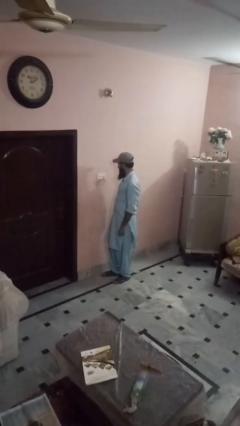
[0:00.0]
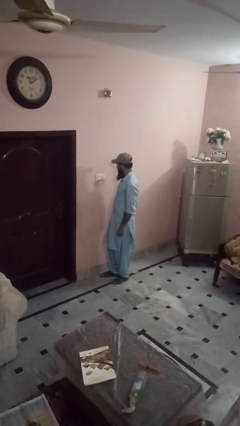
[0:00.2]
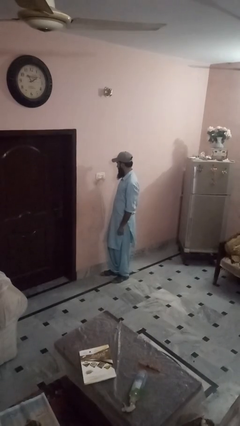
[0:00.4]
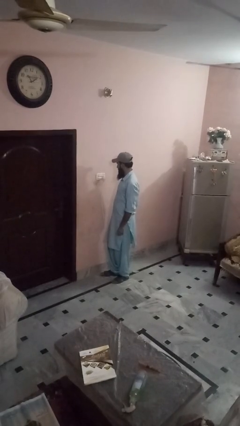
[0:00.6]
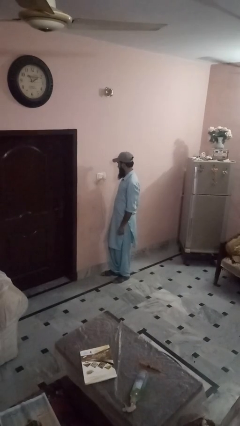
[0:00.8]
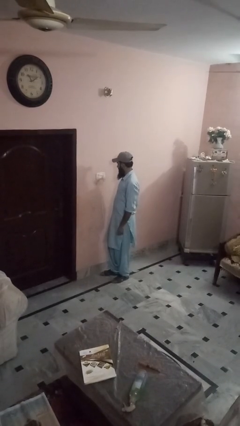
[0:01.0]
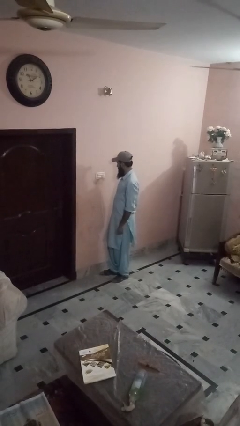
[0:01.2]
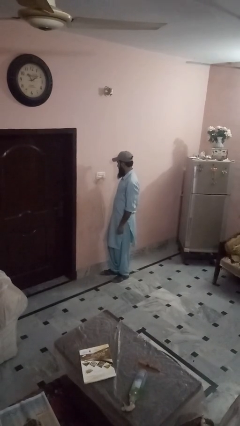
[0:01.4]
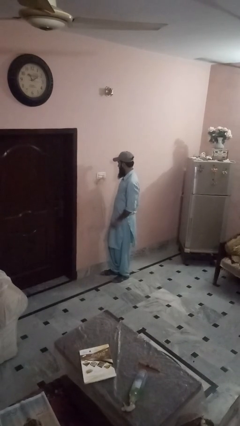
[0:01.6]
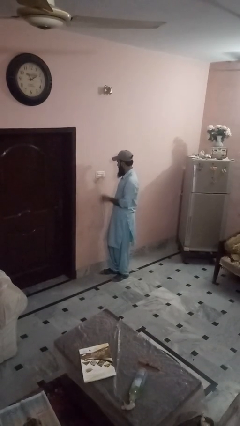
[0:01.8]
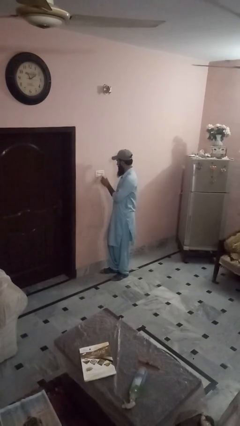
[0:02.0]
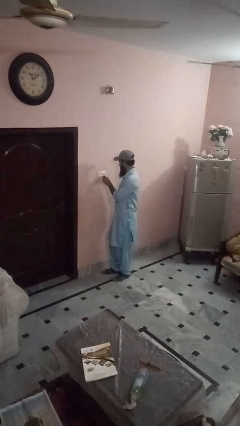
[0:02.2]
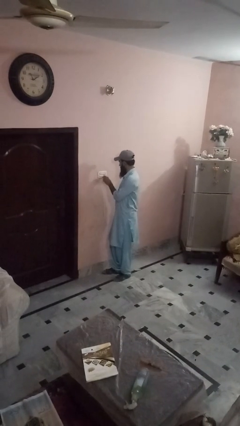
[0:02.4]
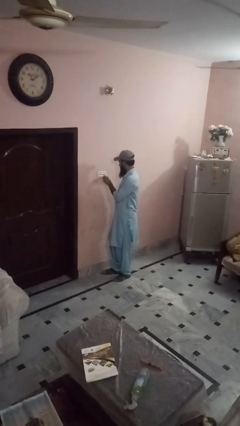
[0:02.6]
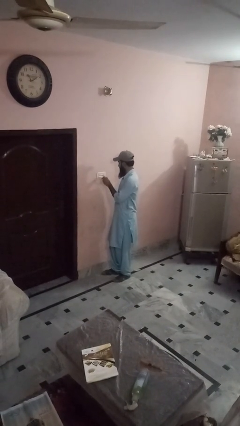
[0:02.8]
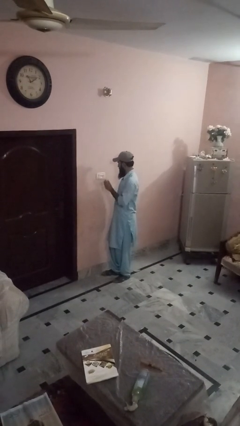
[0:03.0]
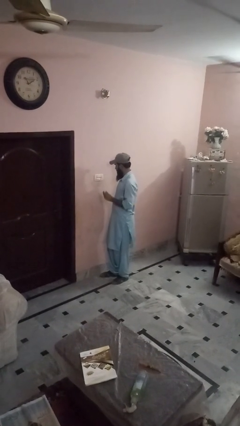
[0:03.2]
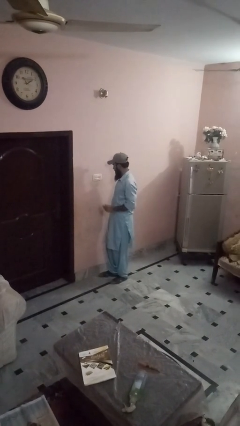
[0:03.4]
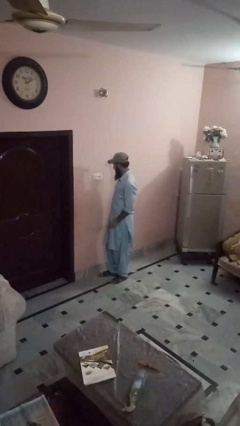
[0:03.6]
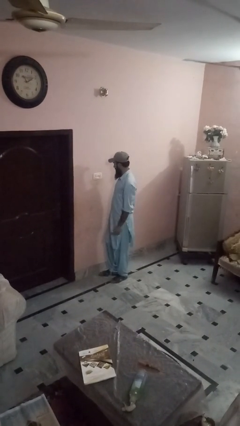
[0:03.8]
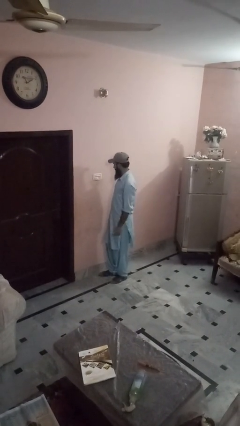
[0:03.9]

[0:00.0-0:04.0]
person unplugs from electrical socket

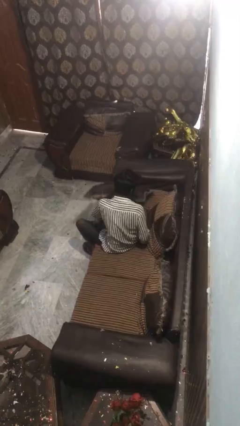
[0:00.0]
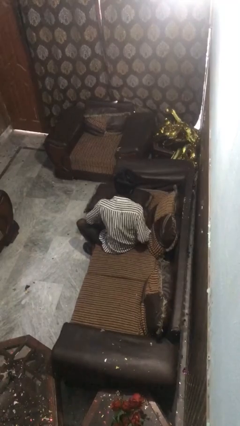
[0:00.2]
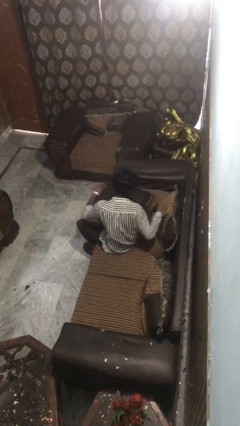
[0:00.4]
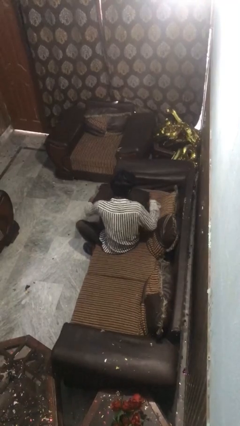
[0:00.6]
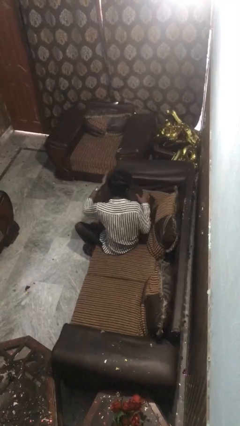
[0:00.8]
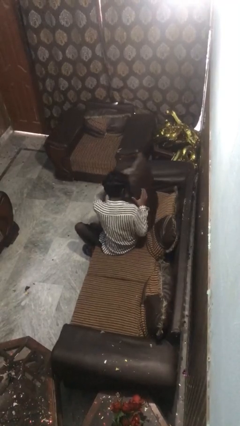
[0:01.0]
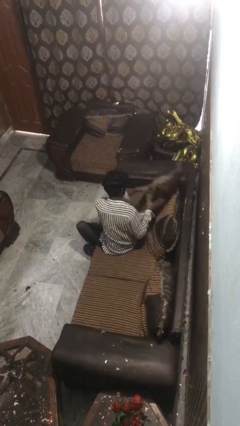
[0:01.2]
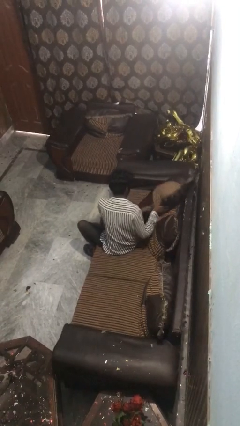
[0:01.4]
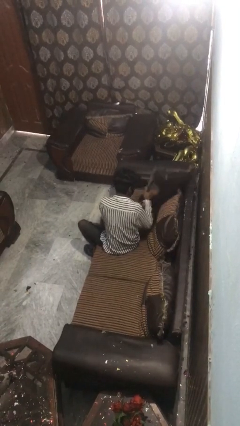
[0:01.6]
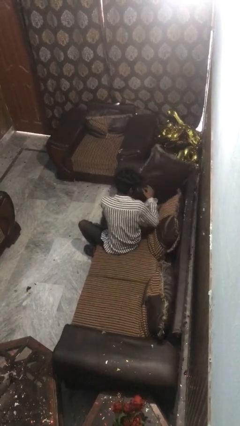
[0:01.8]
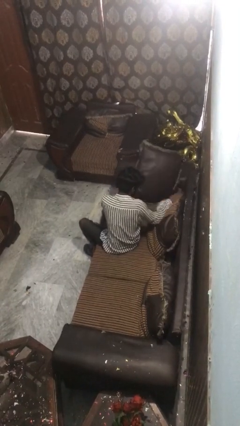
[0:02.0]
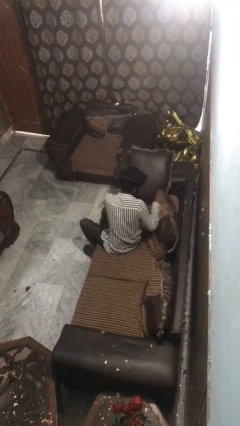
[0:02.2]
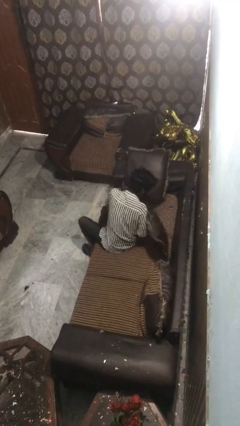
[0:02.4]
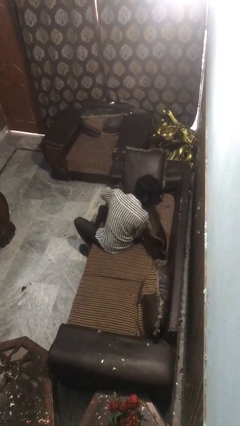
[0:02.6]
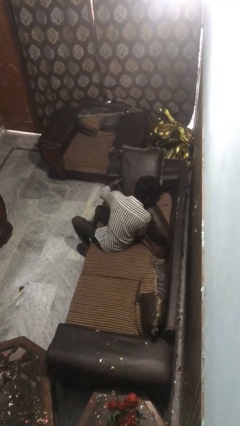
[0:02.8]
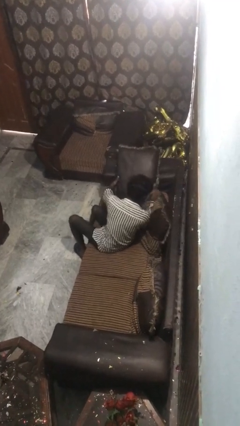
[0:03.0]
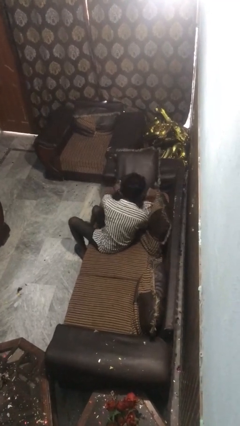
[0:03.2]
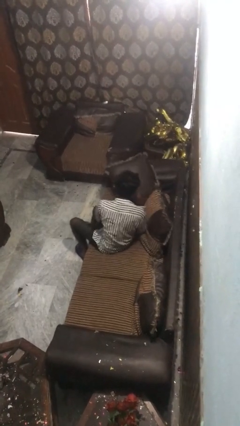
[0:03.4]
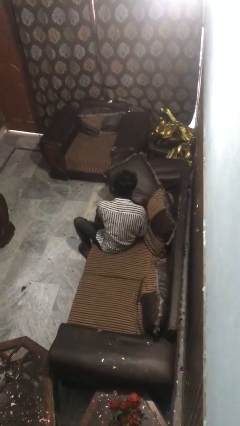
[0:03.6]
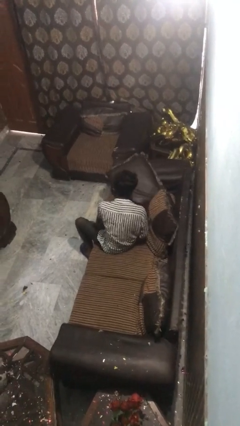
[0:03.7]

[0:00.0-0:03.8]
person searches in couch

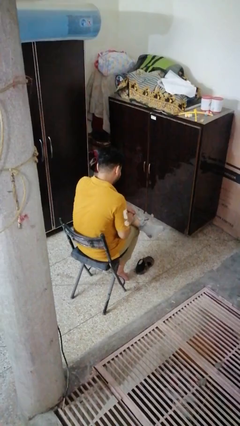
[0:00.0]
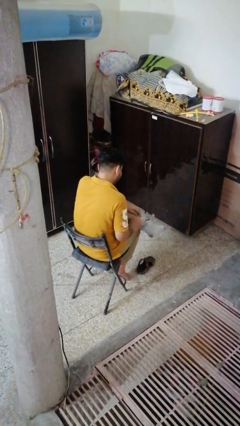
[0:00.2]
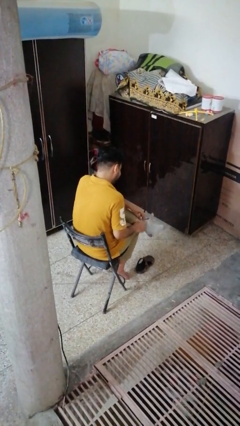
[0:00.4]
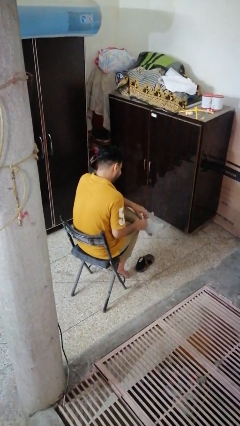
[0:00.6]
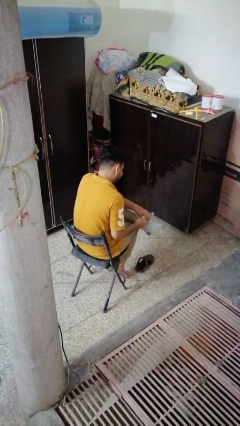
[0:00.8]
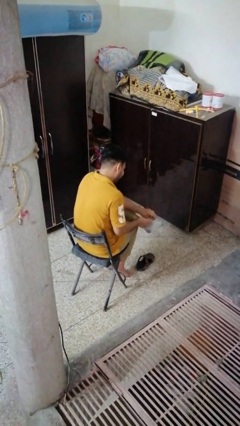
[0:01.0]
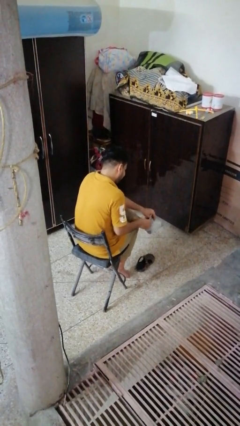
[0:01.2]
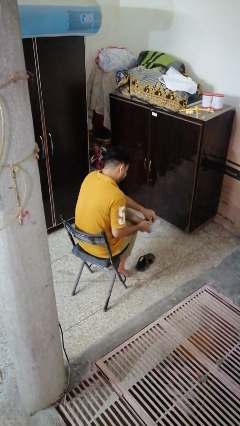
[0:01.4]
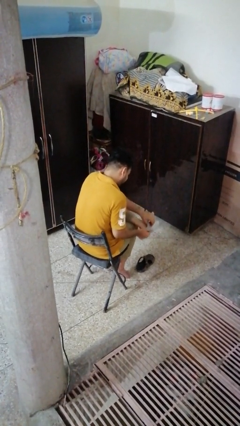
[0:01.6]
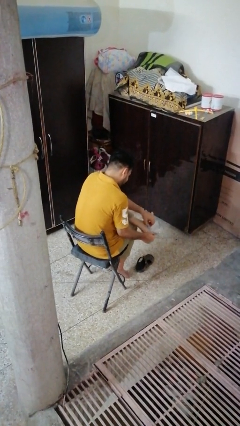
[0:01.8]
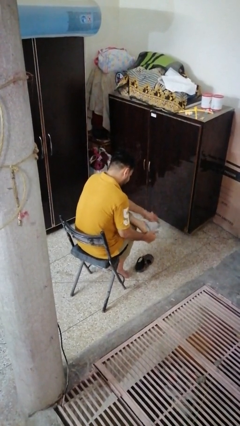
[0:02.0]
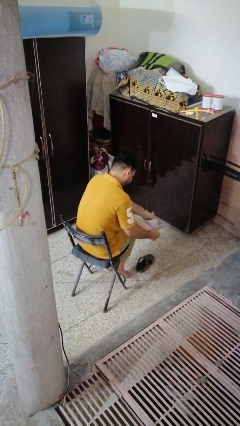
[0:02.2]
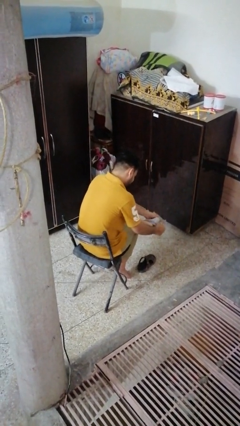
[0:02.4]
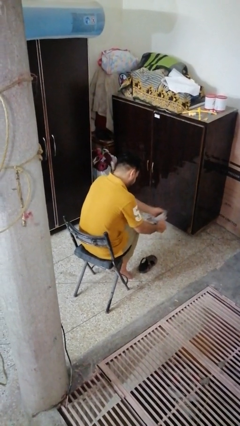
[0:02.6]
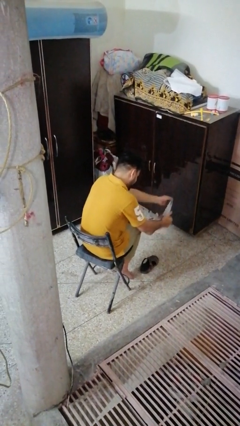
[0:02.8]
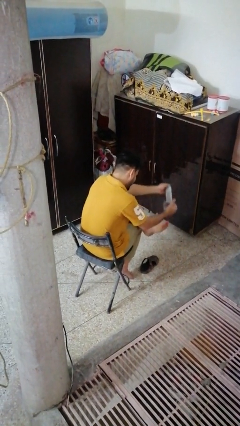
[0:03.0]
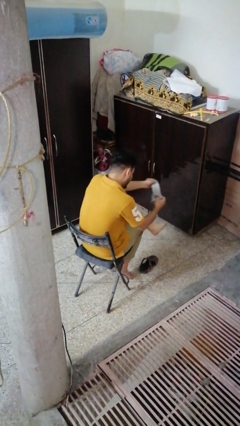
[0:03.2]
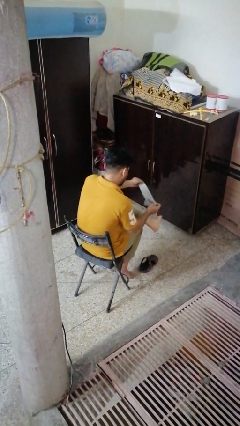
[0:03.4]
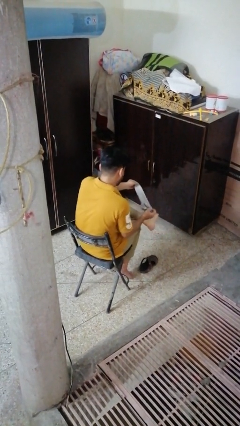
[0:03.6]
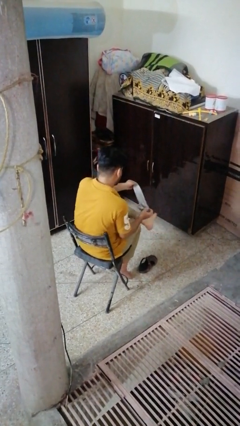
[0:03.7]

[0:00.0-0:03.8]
person takes off socks

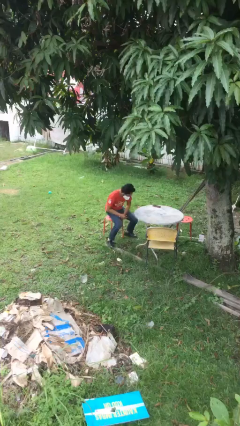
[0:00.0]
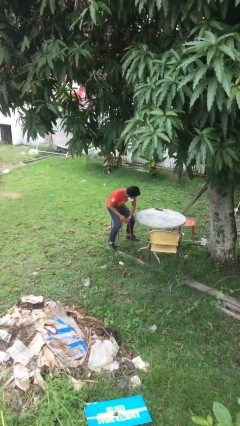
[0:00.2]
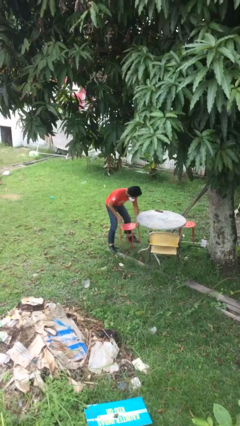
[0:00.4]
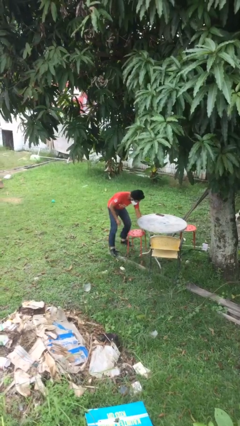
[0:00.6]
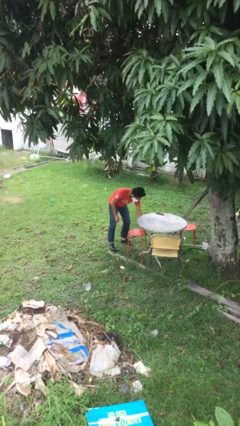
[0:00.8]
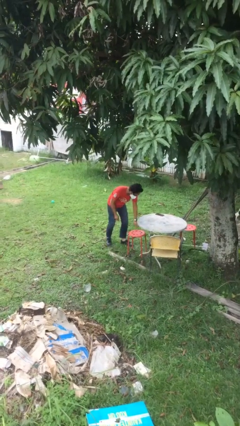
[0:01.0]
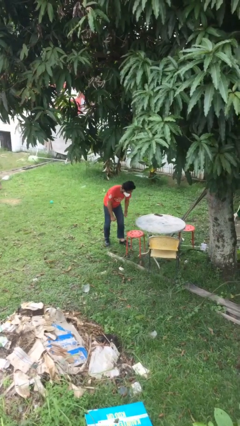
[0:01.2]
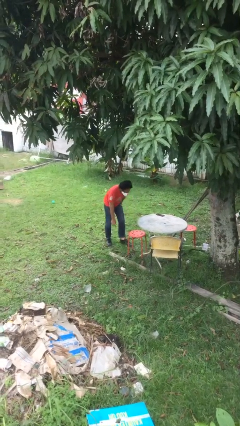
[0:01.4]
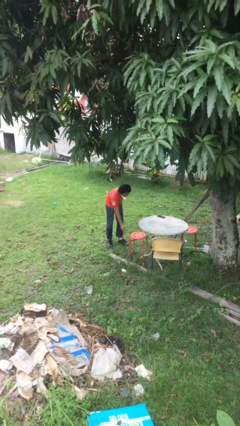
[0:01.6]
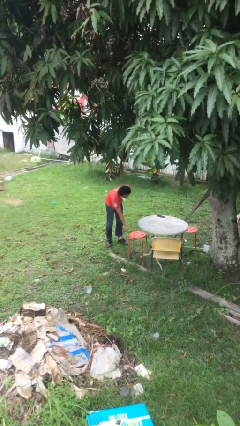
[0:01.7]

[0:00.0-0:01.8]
person stands up

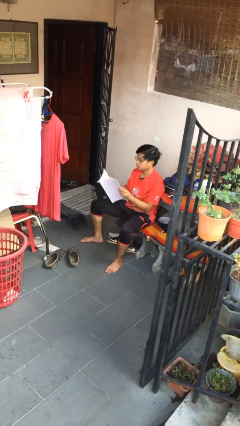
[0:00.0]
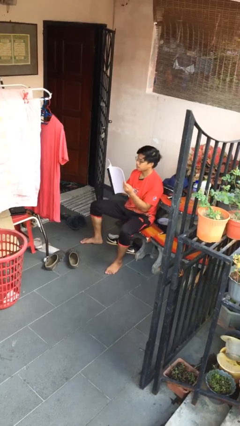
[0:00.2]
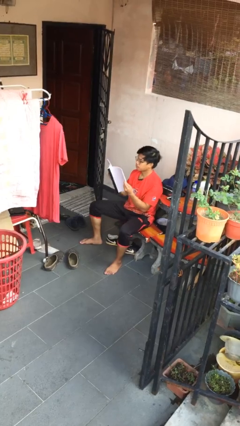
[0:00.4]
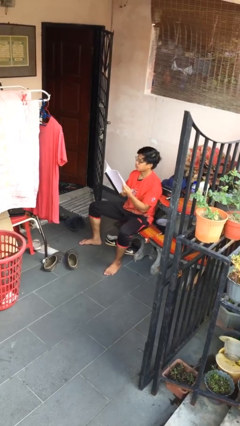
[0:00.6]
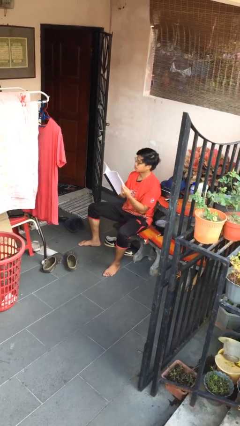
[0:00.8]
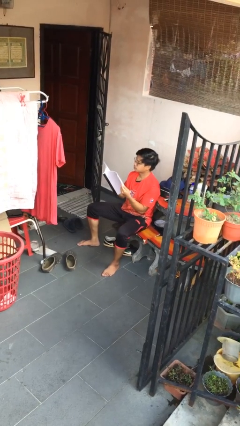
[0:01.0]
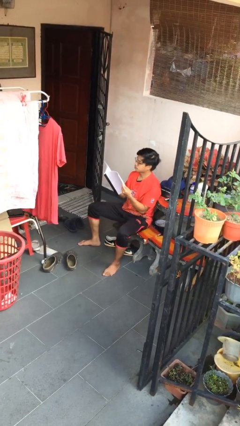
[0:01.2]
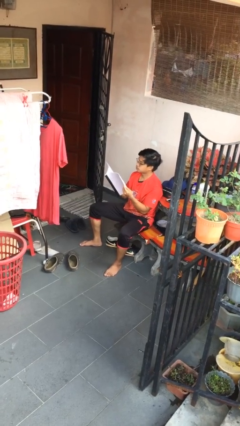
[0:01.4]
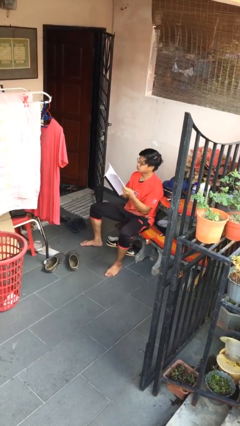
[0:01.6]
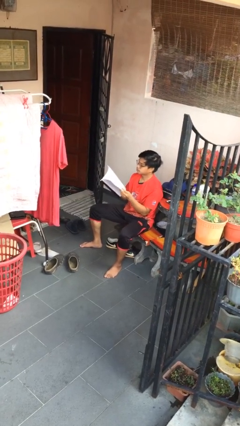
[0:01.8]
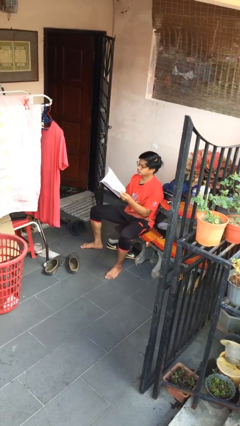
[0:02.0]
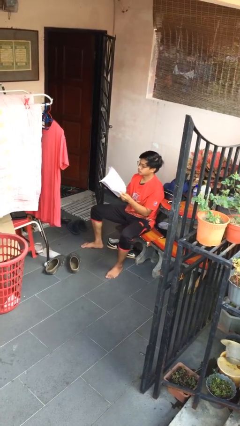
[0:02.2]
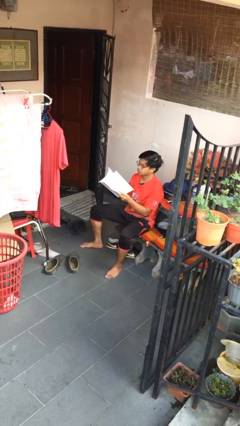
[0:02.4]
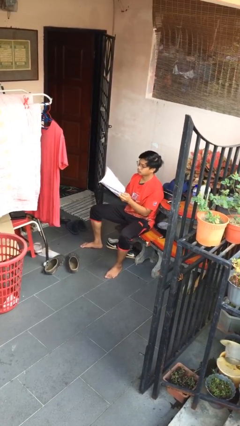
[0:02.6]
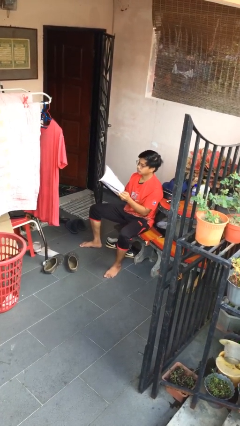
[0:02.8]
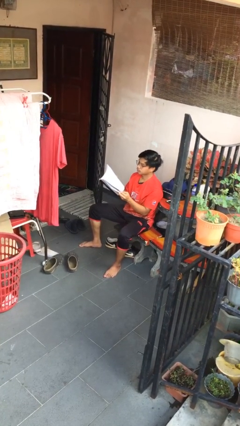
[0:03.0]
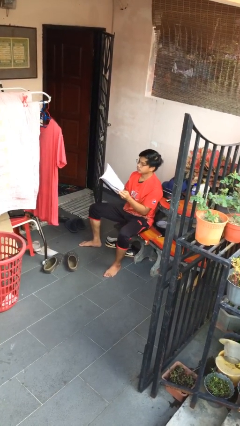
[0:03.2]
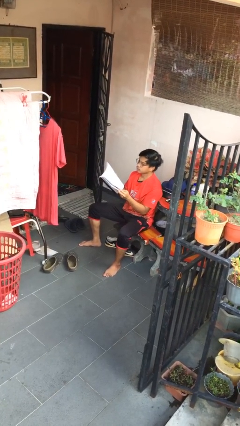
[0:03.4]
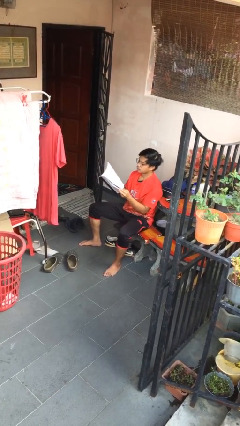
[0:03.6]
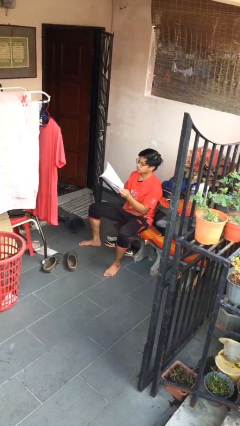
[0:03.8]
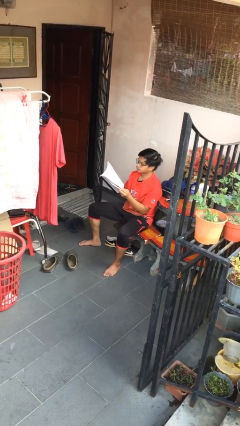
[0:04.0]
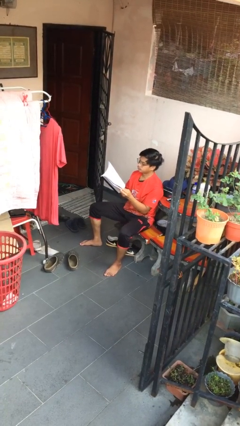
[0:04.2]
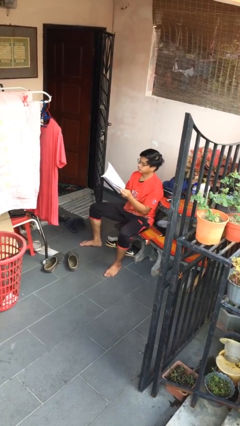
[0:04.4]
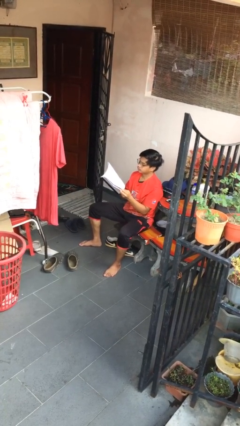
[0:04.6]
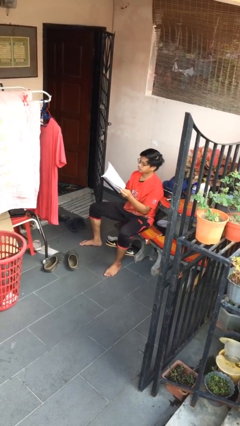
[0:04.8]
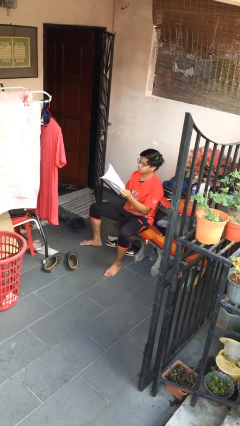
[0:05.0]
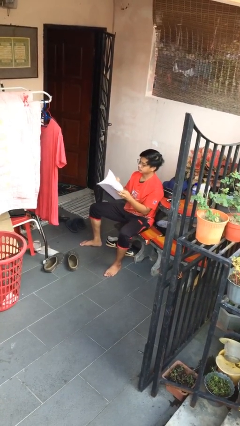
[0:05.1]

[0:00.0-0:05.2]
person reads document
